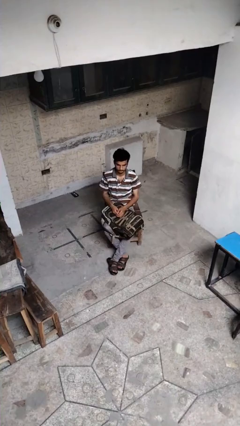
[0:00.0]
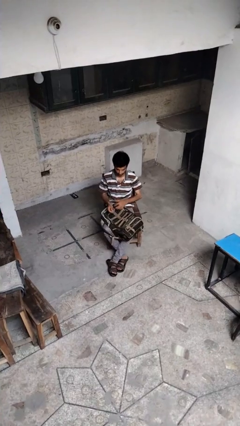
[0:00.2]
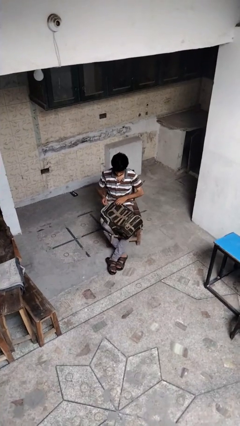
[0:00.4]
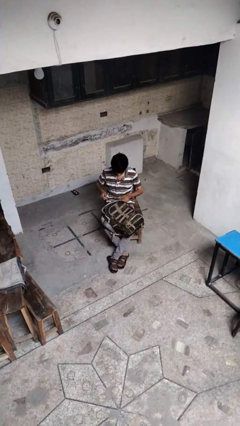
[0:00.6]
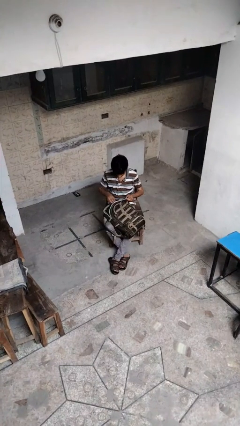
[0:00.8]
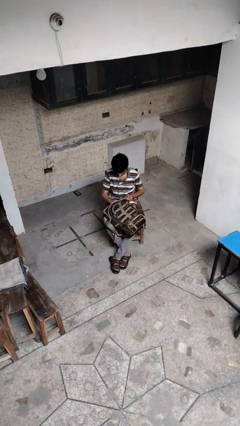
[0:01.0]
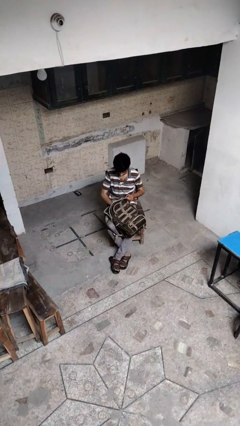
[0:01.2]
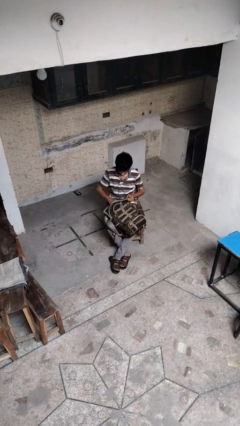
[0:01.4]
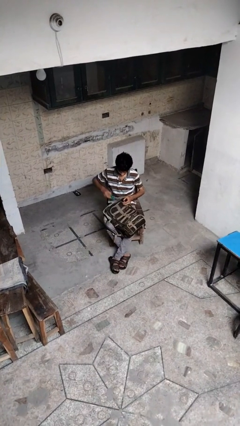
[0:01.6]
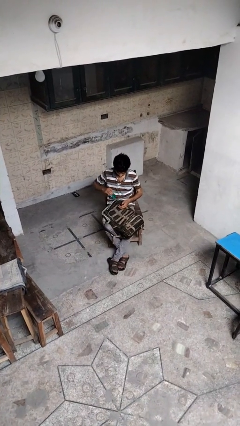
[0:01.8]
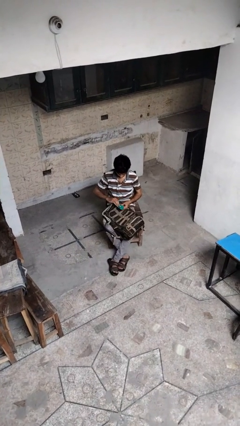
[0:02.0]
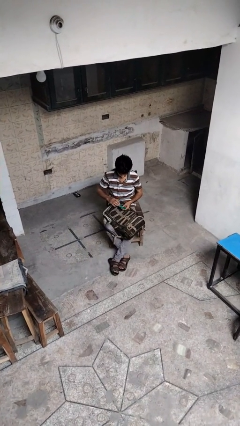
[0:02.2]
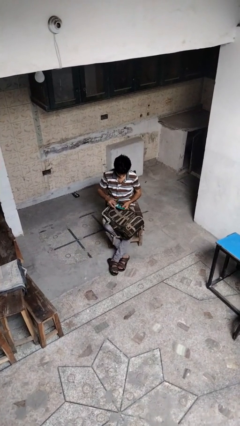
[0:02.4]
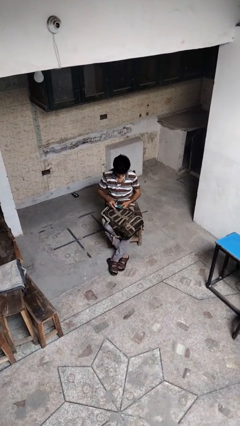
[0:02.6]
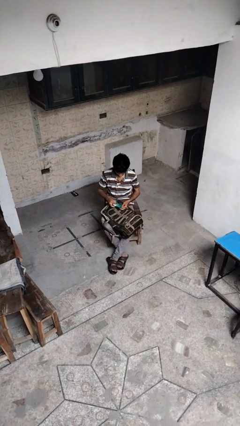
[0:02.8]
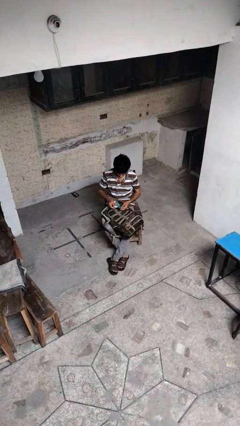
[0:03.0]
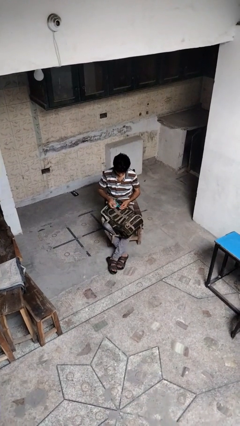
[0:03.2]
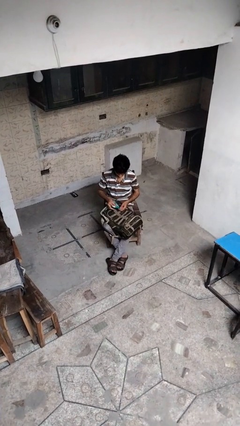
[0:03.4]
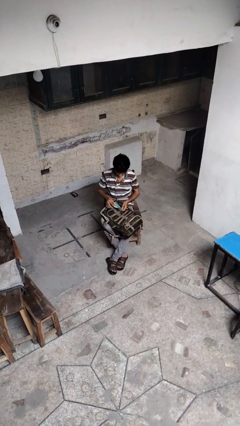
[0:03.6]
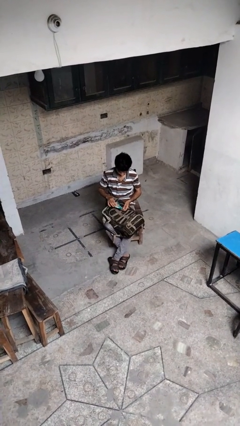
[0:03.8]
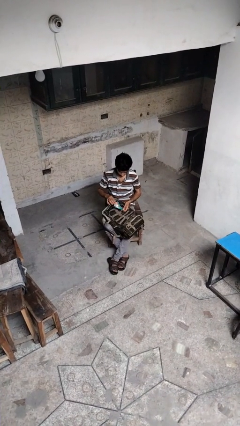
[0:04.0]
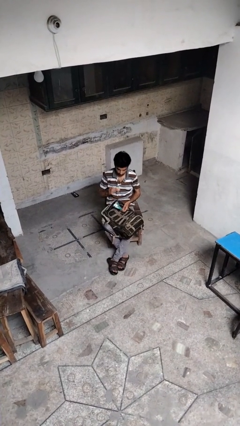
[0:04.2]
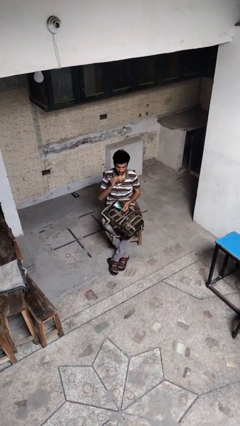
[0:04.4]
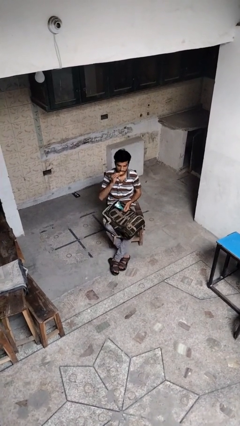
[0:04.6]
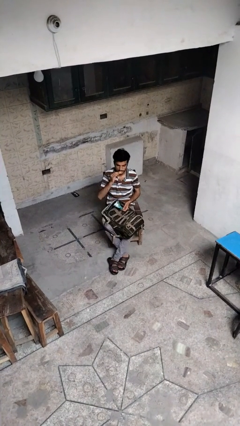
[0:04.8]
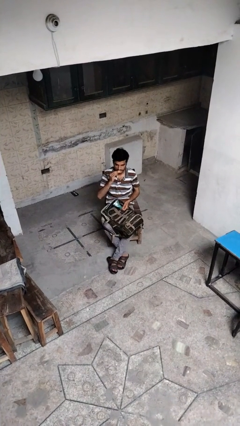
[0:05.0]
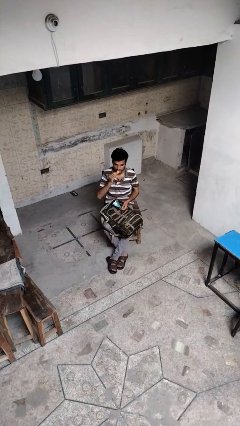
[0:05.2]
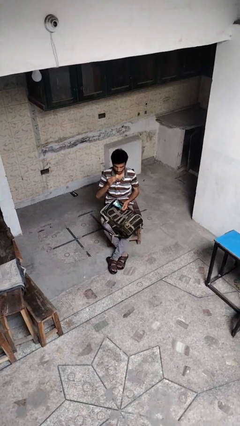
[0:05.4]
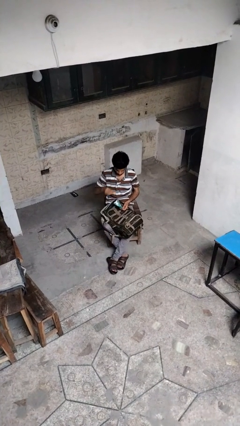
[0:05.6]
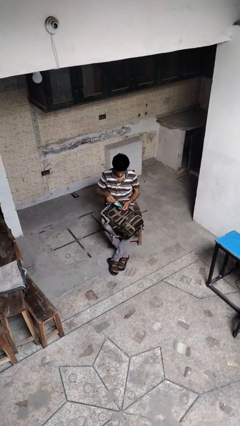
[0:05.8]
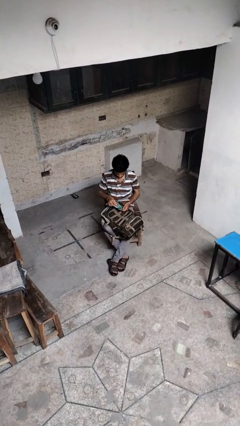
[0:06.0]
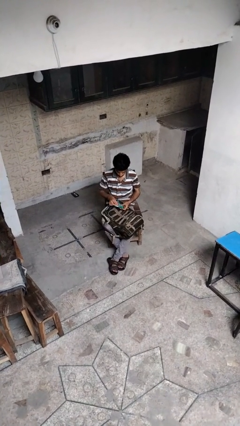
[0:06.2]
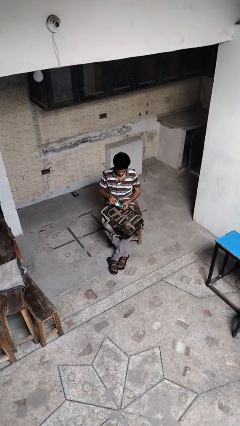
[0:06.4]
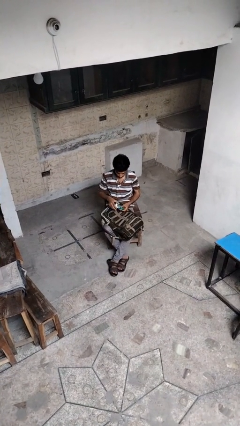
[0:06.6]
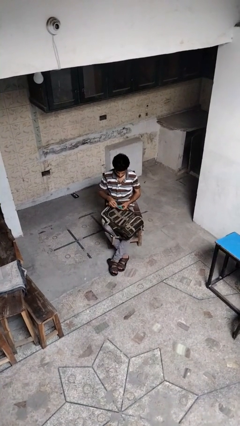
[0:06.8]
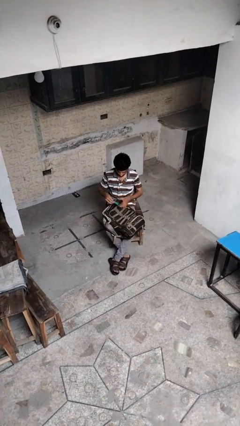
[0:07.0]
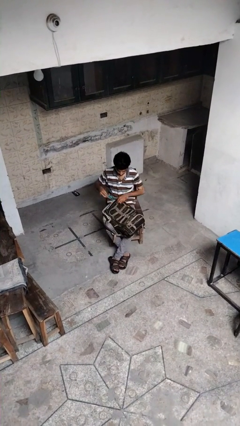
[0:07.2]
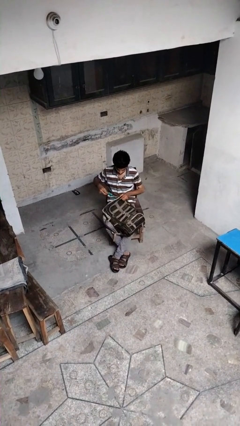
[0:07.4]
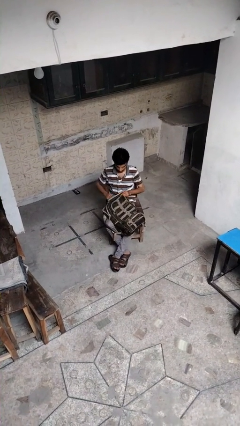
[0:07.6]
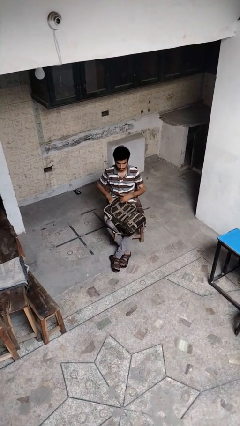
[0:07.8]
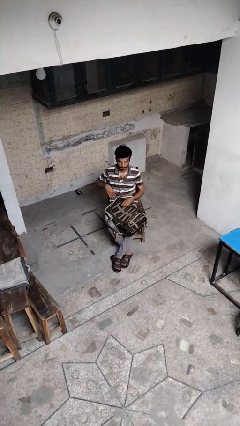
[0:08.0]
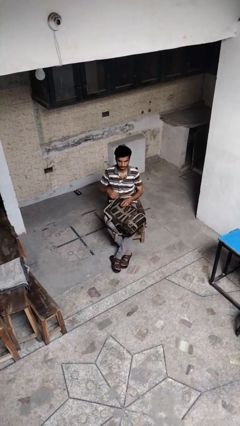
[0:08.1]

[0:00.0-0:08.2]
person eats snack from bag

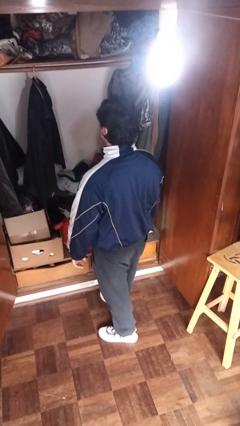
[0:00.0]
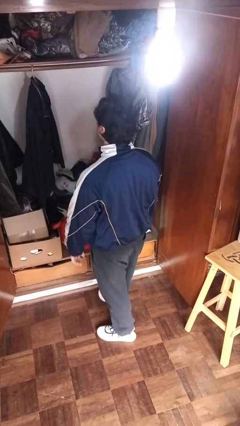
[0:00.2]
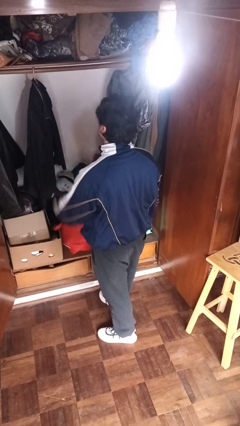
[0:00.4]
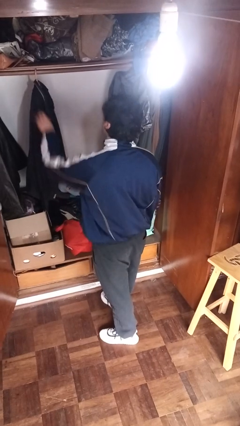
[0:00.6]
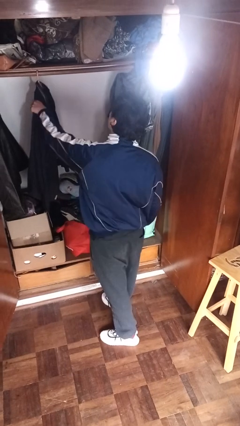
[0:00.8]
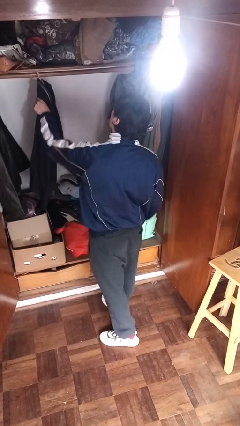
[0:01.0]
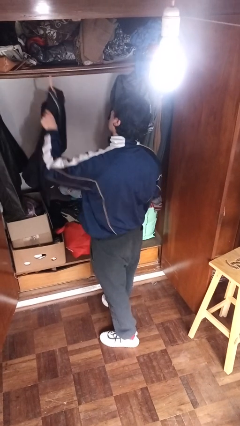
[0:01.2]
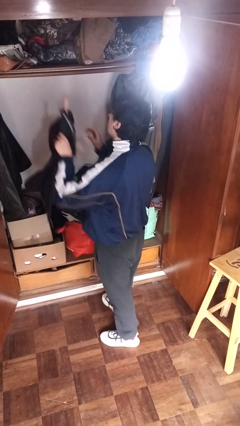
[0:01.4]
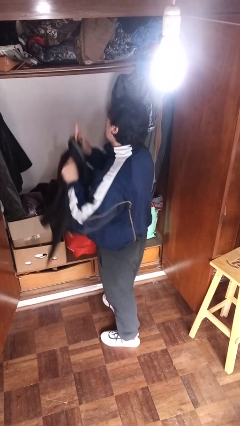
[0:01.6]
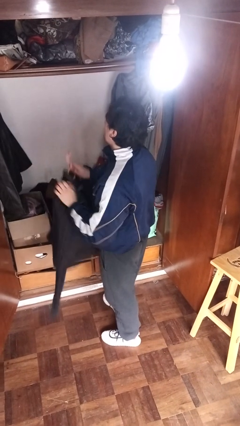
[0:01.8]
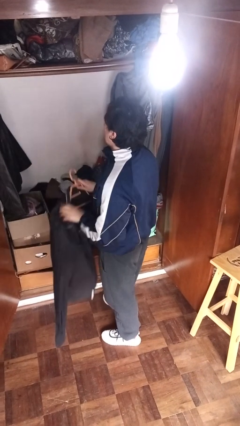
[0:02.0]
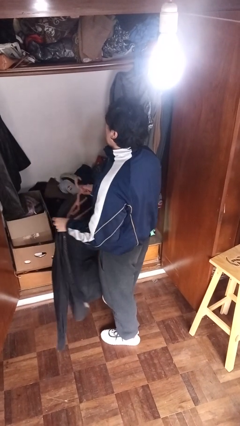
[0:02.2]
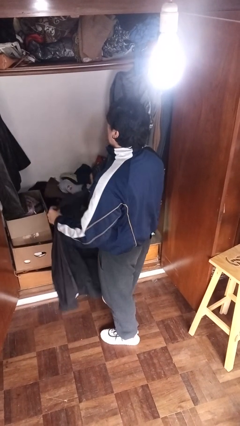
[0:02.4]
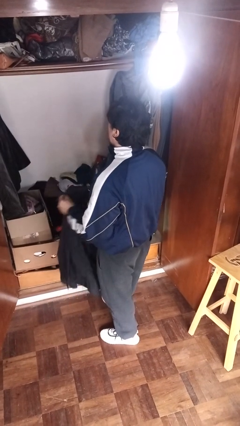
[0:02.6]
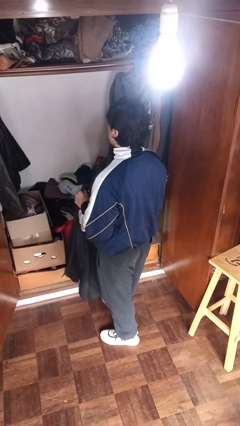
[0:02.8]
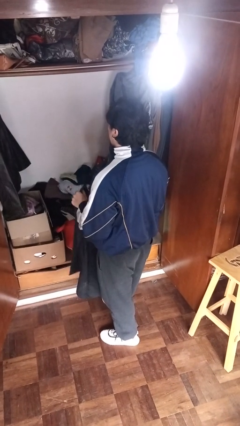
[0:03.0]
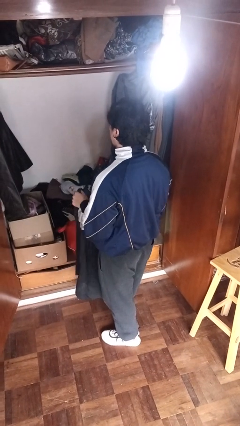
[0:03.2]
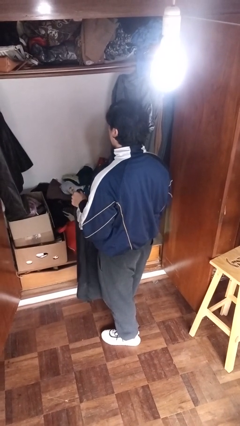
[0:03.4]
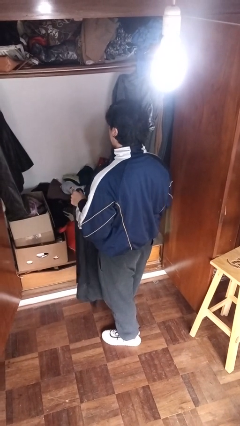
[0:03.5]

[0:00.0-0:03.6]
person takes clothes from closet

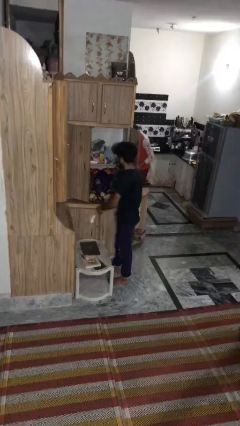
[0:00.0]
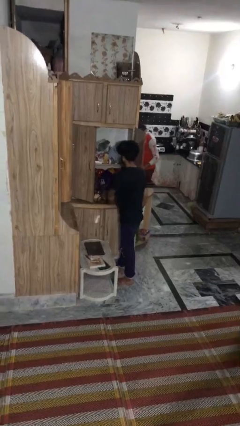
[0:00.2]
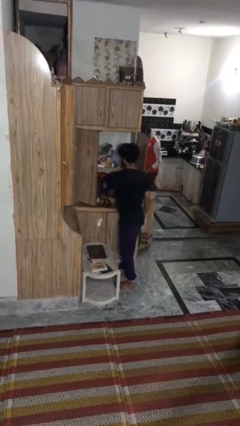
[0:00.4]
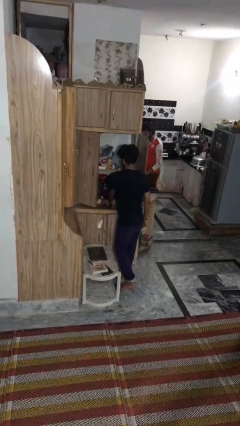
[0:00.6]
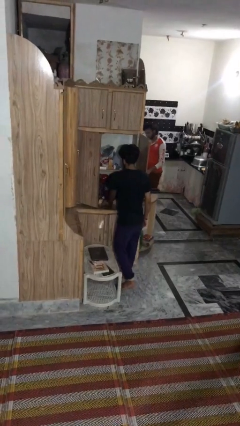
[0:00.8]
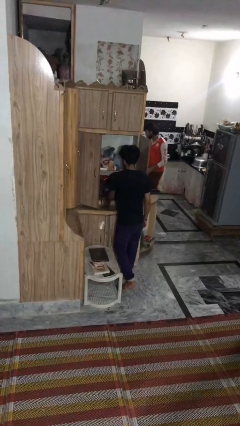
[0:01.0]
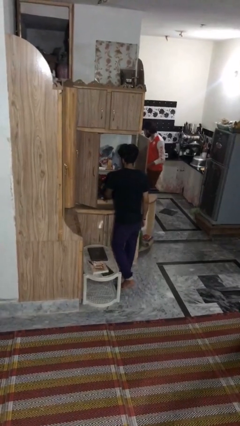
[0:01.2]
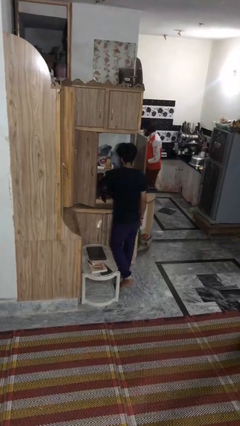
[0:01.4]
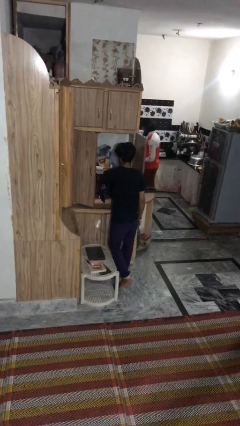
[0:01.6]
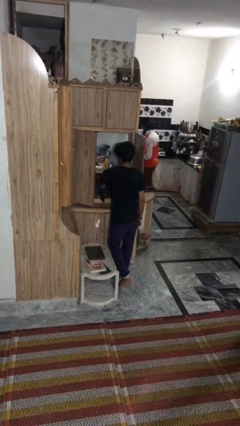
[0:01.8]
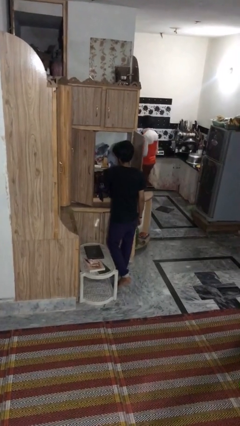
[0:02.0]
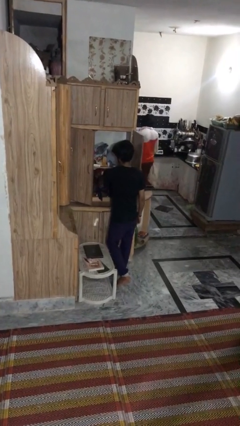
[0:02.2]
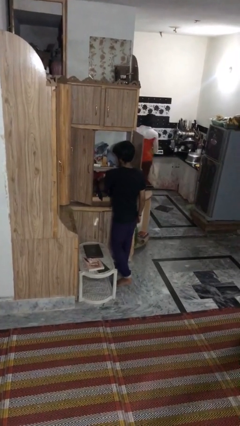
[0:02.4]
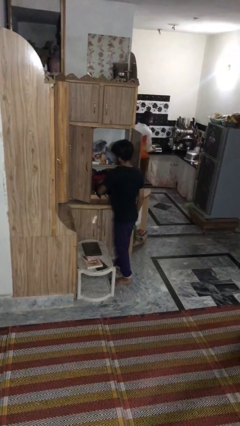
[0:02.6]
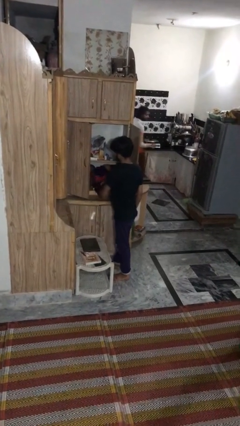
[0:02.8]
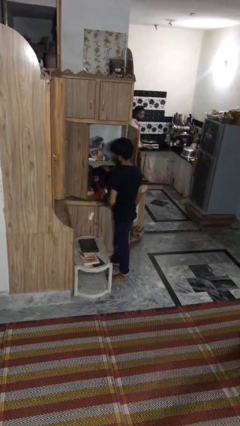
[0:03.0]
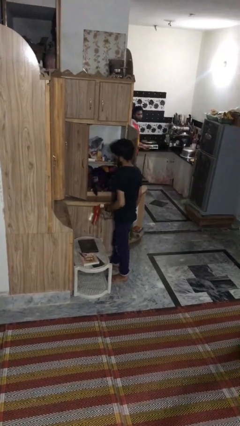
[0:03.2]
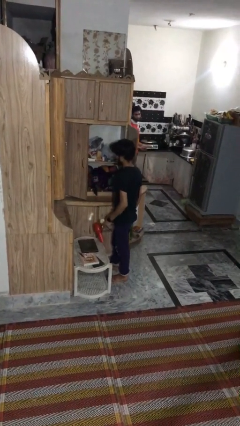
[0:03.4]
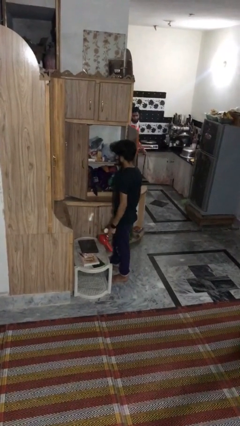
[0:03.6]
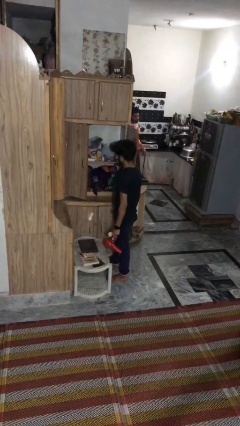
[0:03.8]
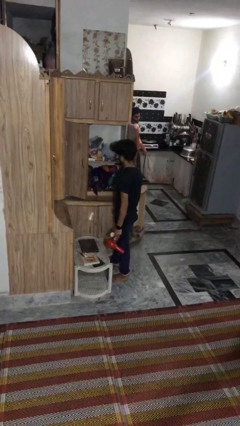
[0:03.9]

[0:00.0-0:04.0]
person picks up object from cabinet

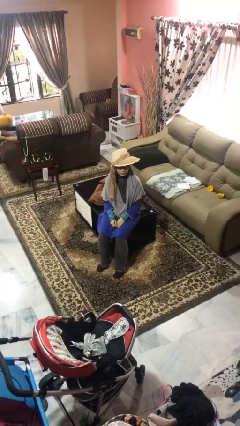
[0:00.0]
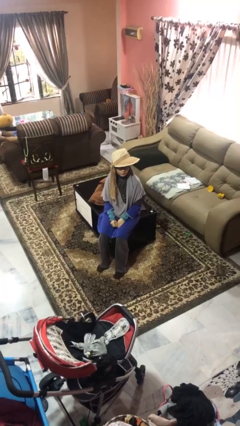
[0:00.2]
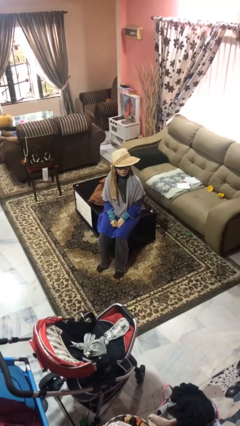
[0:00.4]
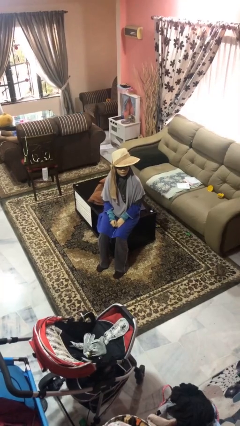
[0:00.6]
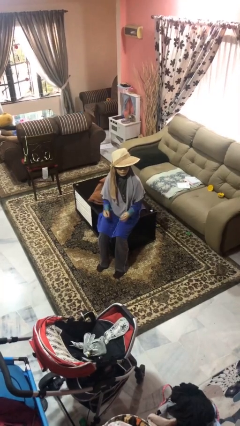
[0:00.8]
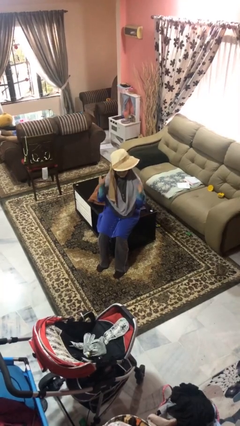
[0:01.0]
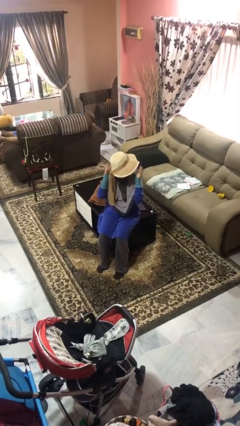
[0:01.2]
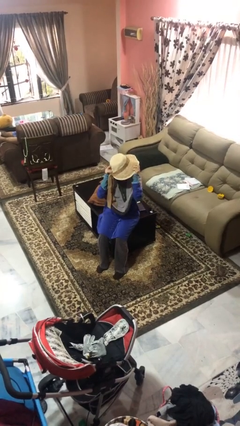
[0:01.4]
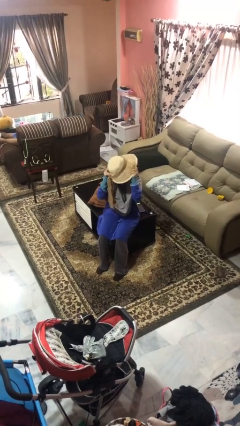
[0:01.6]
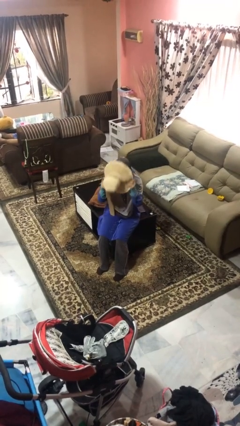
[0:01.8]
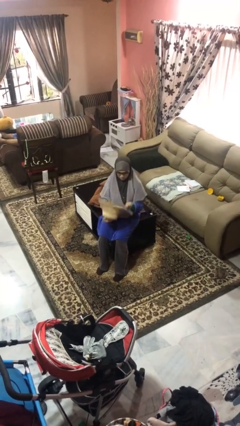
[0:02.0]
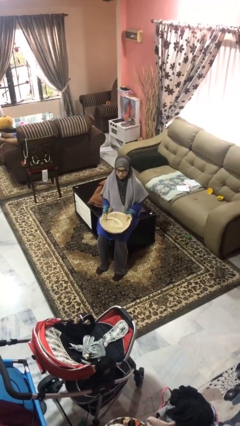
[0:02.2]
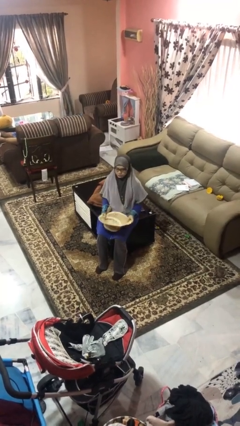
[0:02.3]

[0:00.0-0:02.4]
person takes off hat
